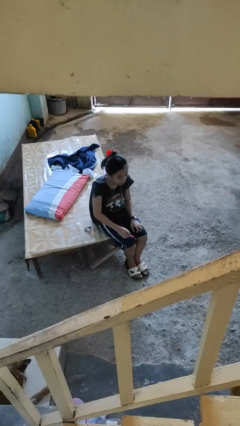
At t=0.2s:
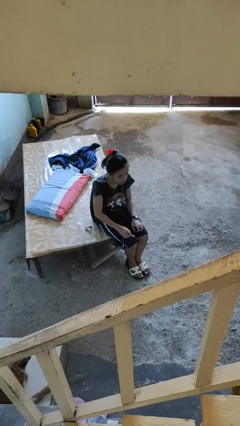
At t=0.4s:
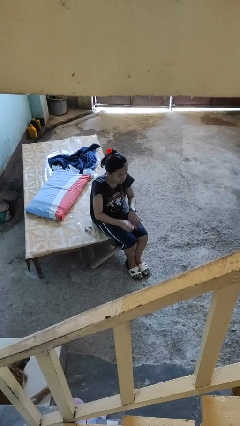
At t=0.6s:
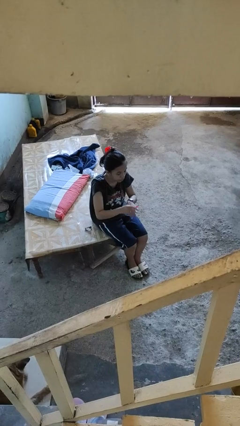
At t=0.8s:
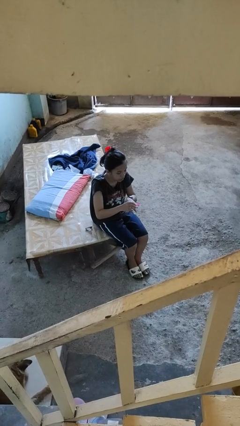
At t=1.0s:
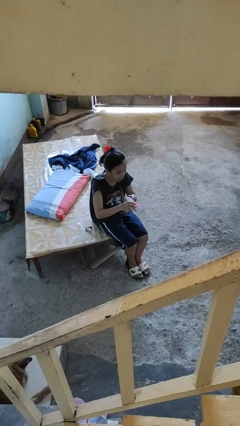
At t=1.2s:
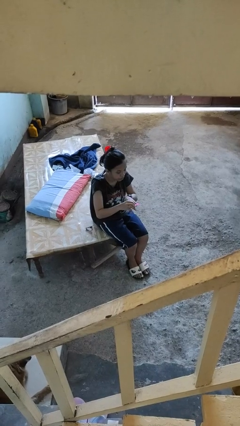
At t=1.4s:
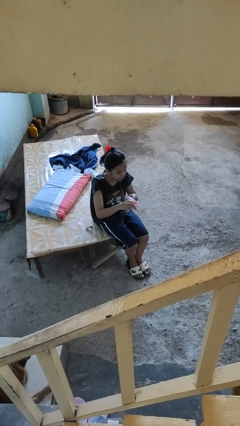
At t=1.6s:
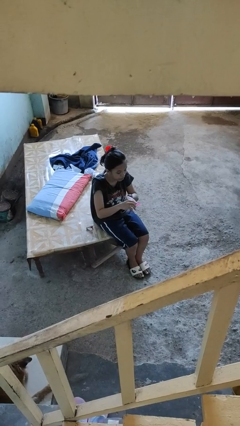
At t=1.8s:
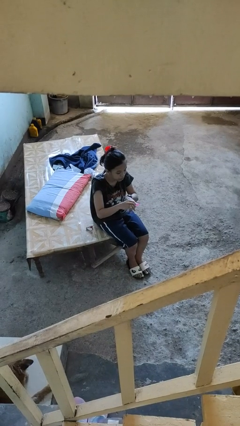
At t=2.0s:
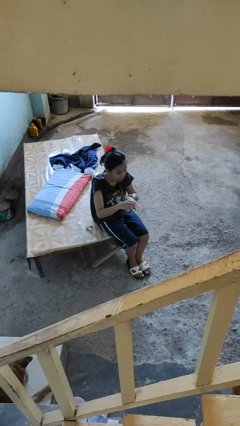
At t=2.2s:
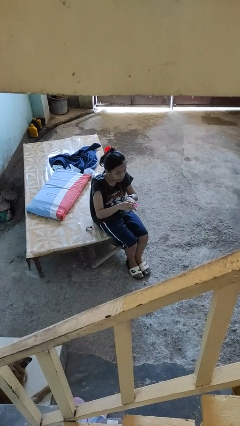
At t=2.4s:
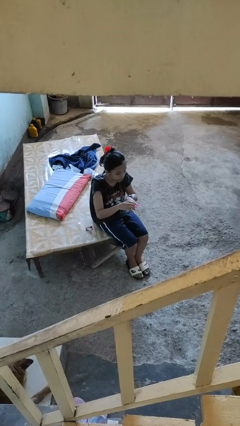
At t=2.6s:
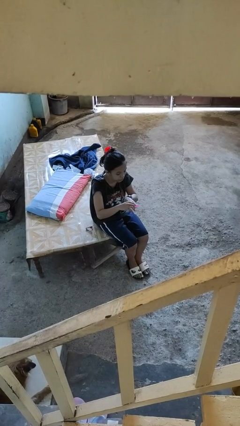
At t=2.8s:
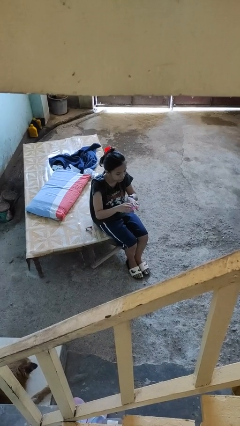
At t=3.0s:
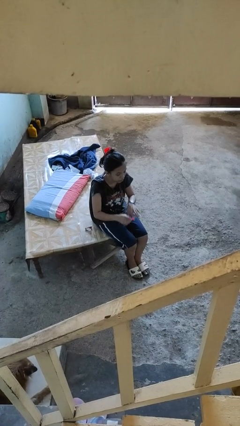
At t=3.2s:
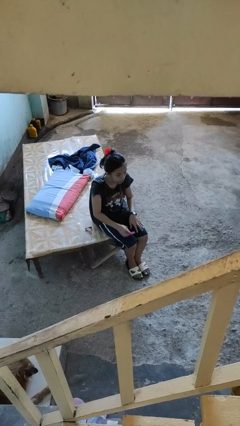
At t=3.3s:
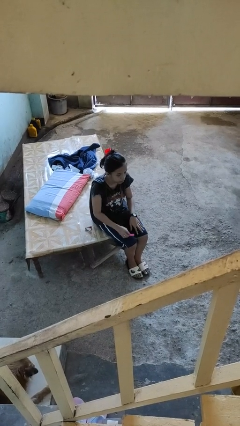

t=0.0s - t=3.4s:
person files fingernails

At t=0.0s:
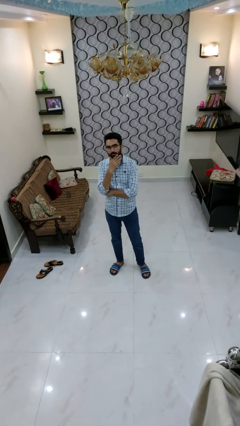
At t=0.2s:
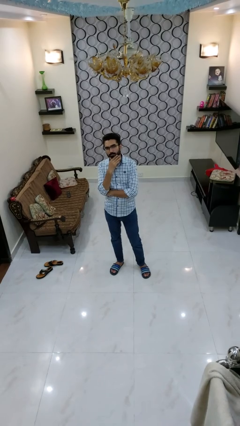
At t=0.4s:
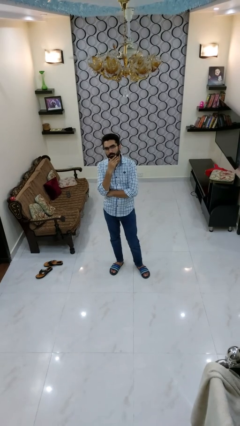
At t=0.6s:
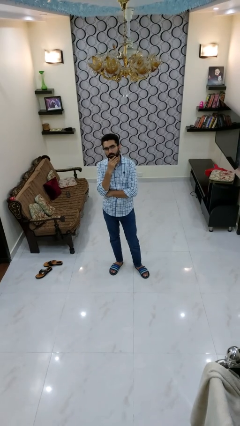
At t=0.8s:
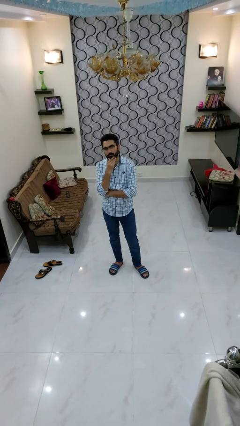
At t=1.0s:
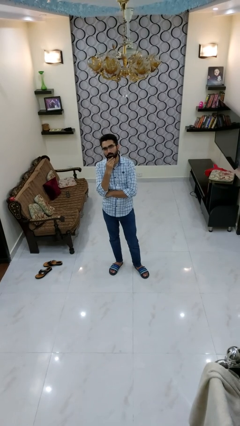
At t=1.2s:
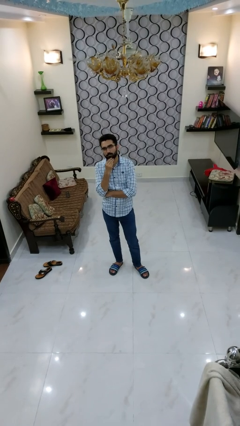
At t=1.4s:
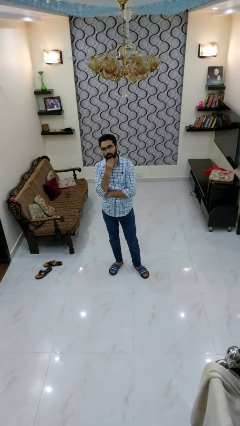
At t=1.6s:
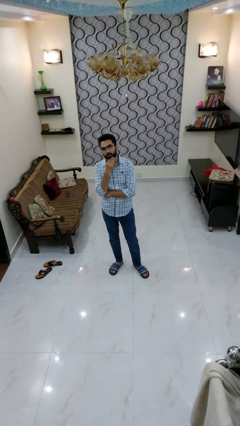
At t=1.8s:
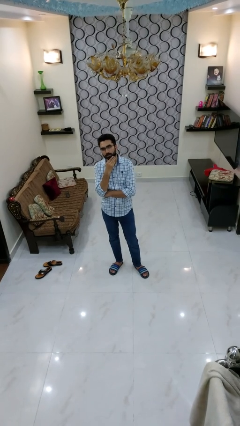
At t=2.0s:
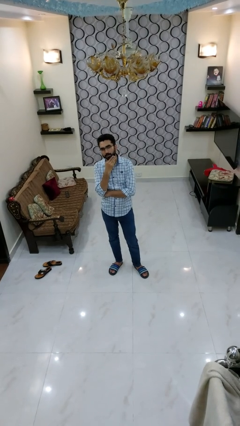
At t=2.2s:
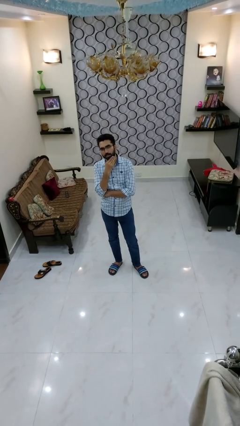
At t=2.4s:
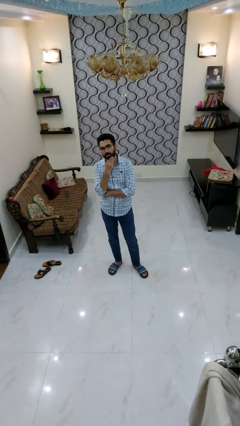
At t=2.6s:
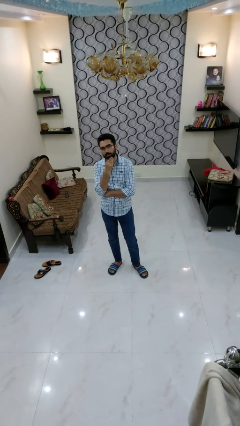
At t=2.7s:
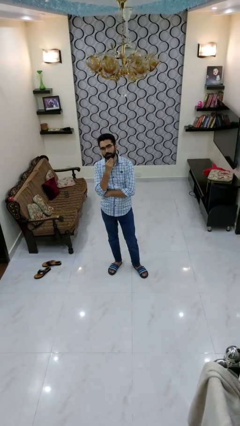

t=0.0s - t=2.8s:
person strokes chin

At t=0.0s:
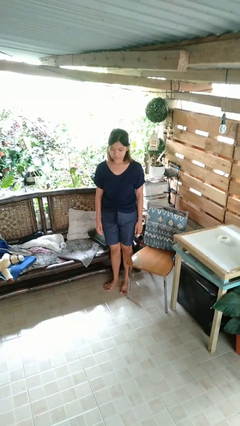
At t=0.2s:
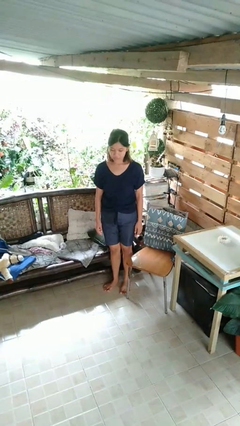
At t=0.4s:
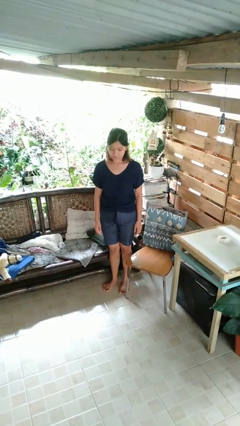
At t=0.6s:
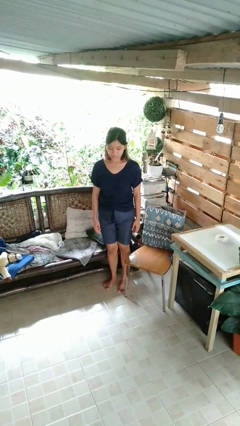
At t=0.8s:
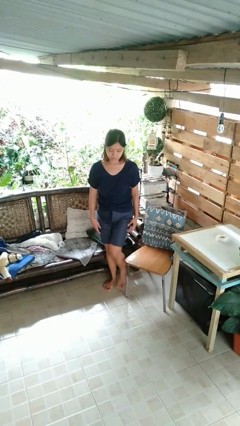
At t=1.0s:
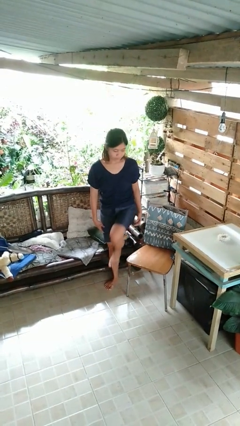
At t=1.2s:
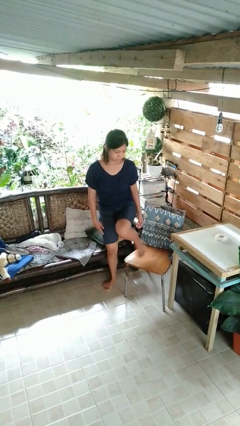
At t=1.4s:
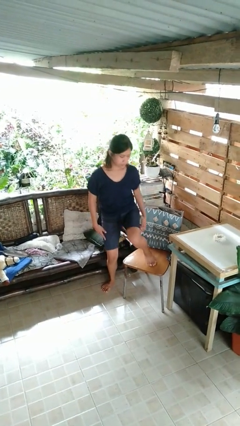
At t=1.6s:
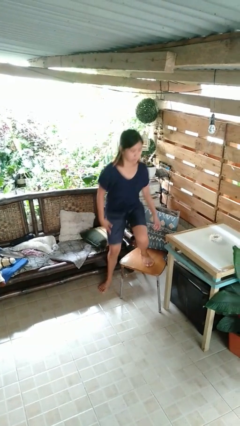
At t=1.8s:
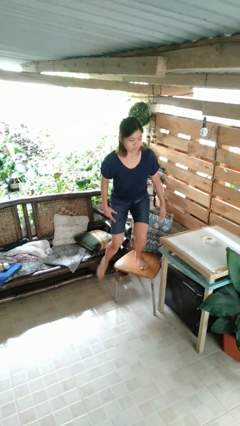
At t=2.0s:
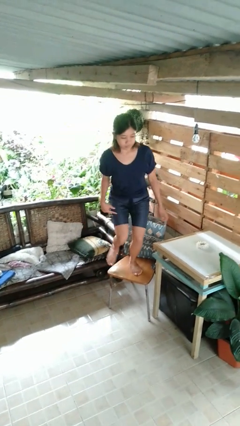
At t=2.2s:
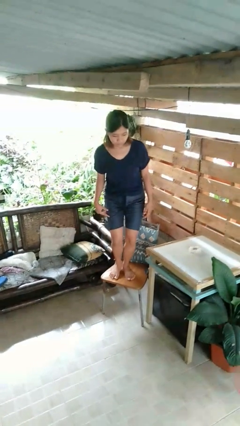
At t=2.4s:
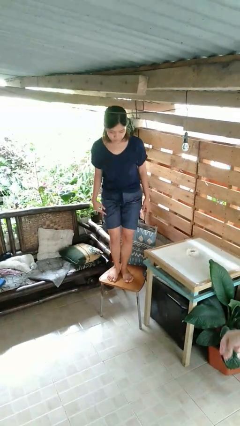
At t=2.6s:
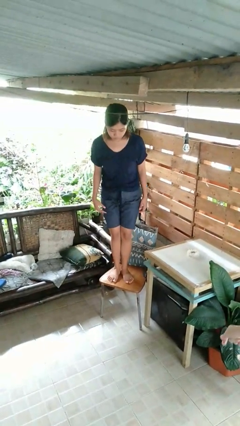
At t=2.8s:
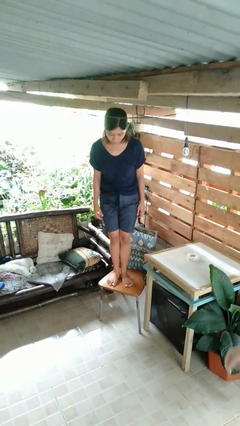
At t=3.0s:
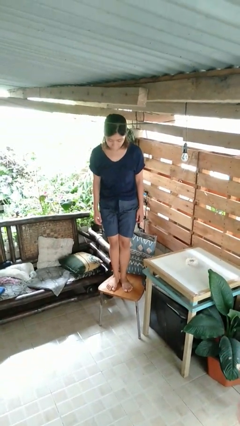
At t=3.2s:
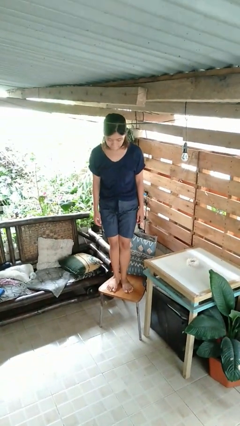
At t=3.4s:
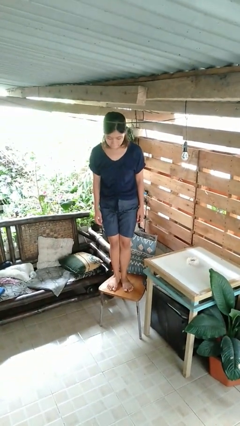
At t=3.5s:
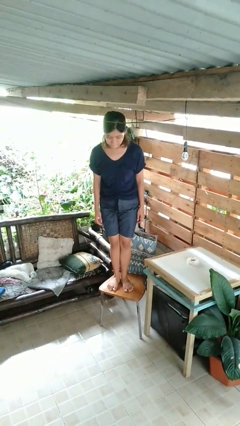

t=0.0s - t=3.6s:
person climbs on chair

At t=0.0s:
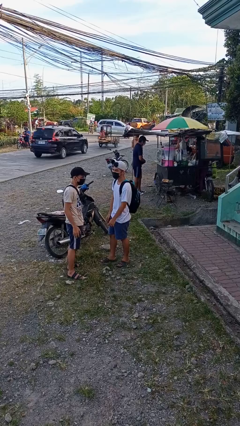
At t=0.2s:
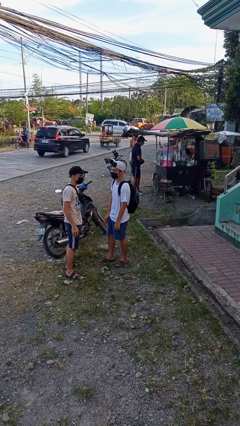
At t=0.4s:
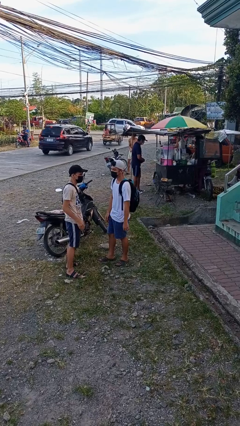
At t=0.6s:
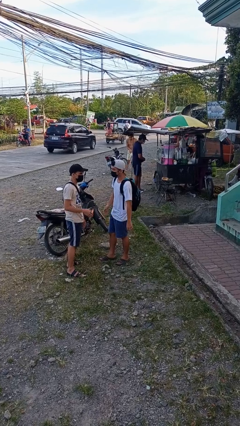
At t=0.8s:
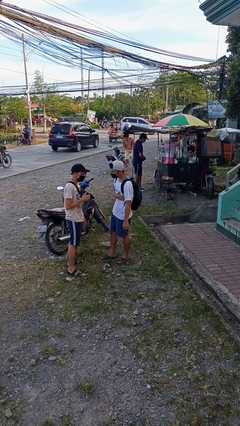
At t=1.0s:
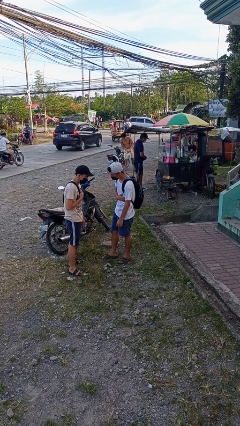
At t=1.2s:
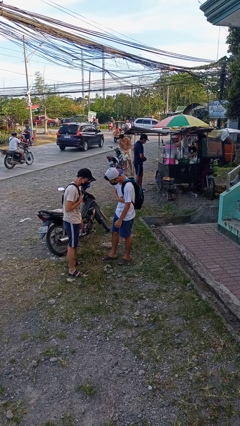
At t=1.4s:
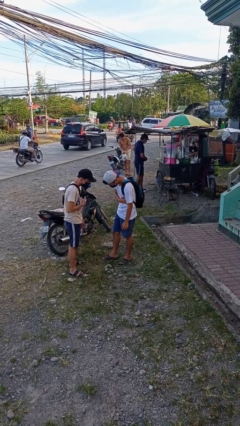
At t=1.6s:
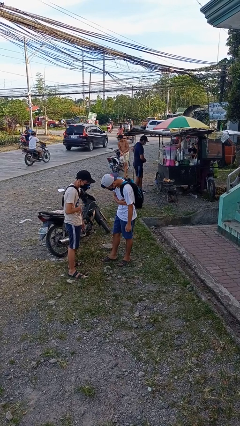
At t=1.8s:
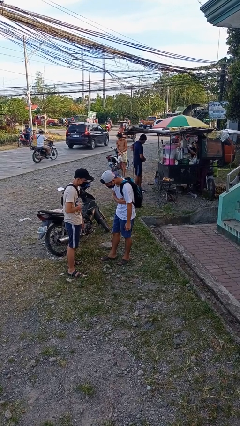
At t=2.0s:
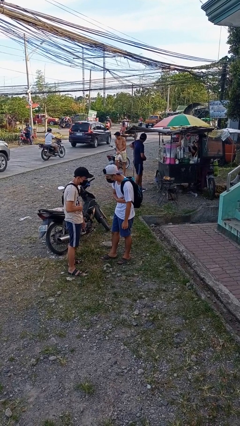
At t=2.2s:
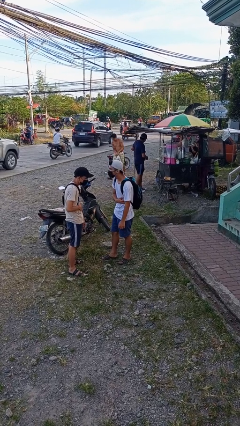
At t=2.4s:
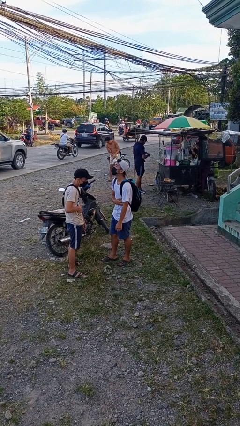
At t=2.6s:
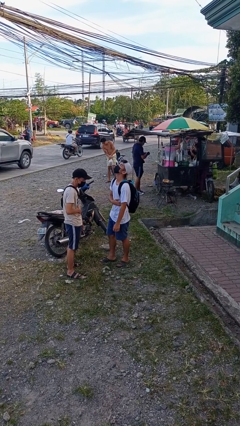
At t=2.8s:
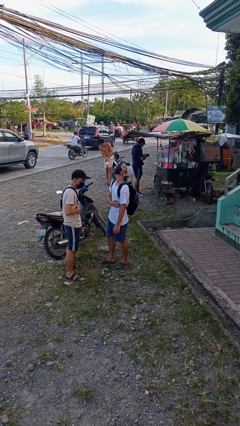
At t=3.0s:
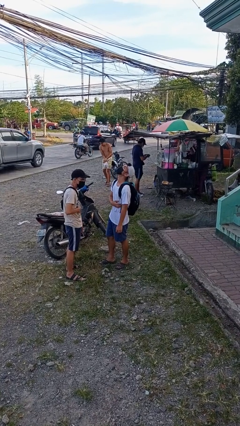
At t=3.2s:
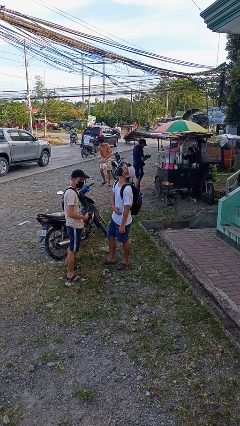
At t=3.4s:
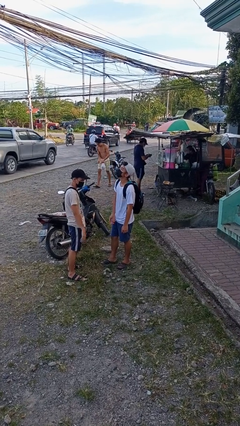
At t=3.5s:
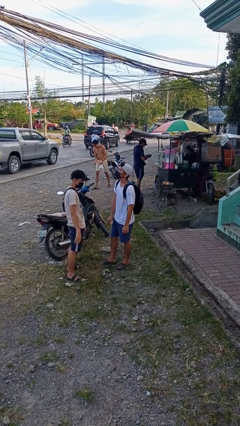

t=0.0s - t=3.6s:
person laughs with person

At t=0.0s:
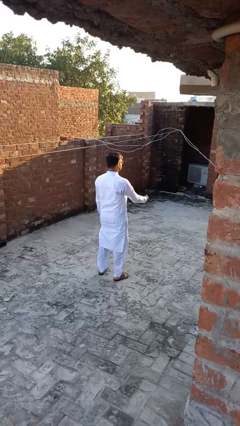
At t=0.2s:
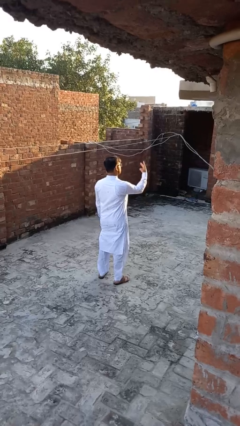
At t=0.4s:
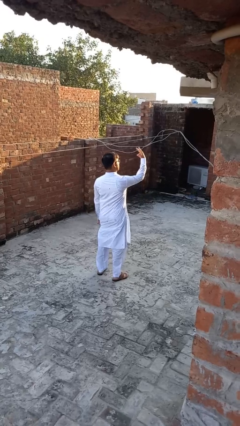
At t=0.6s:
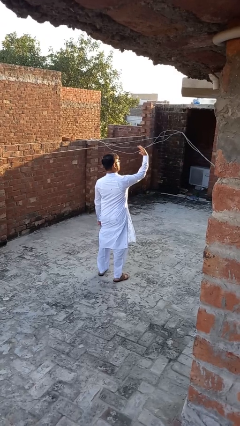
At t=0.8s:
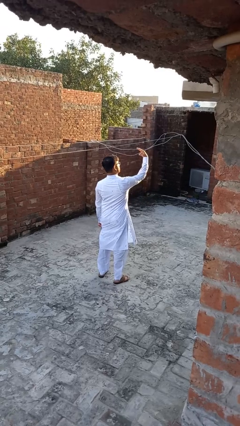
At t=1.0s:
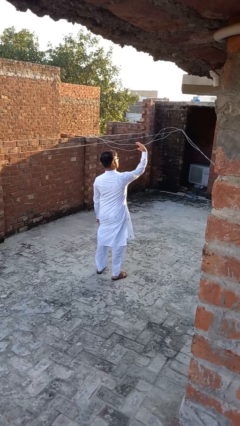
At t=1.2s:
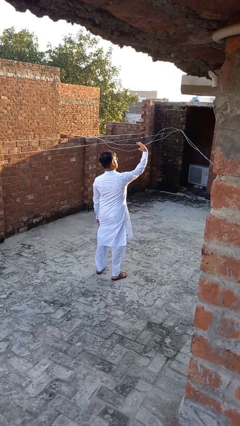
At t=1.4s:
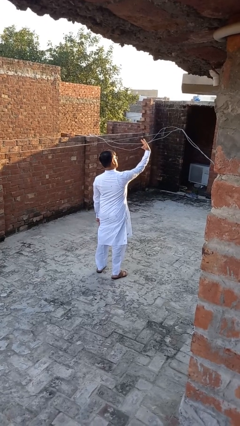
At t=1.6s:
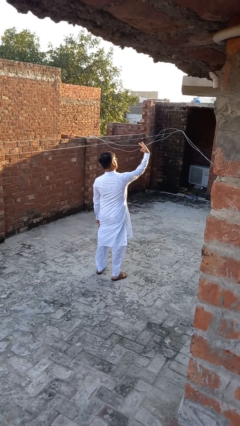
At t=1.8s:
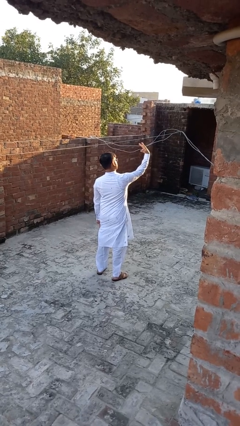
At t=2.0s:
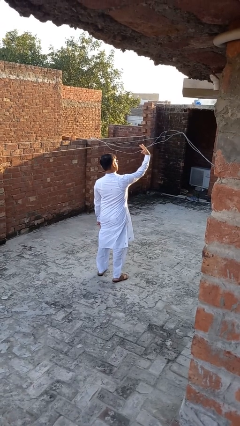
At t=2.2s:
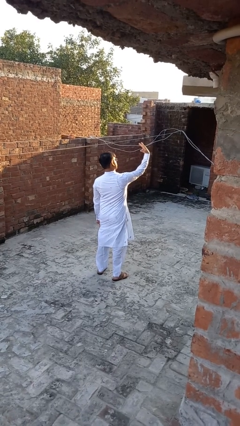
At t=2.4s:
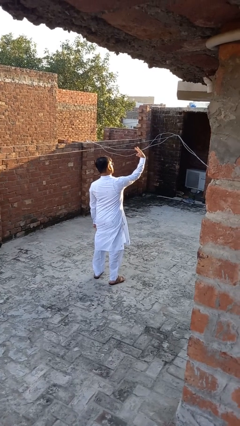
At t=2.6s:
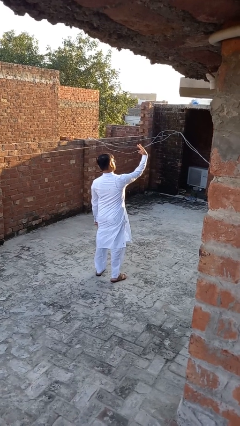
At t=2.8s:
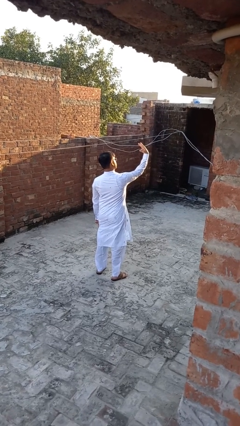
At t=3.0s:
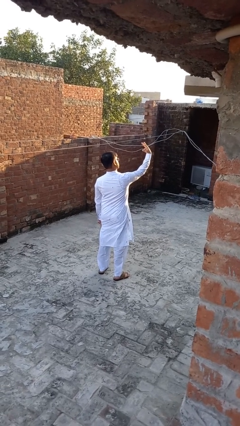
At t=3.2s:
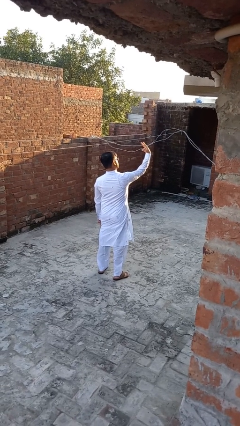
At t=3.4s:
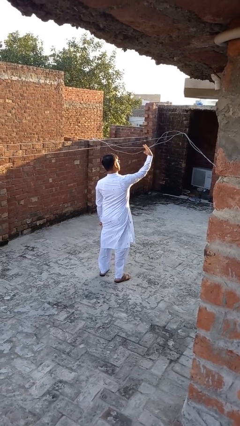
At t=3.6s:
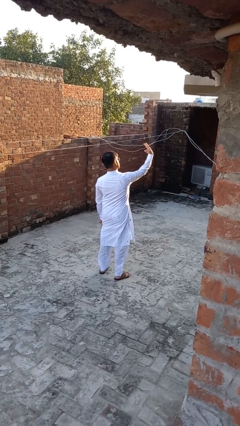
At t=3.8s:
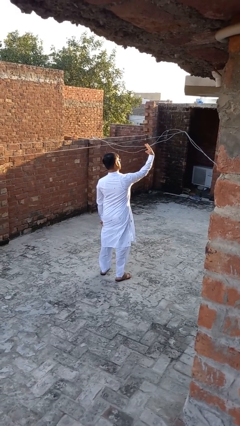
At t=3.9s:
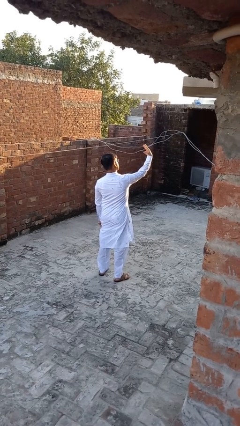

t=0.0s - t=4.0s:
person gestures peace

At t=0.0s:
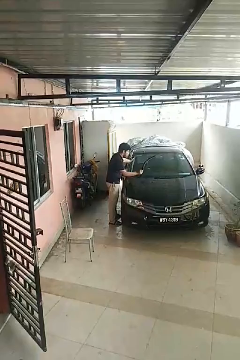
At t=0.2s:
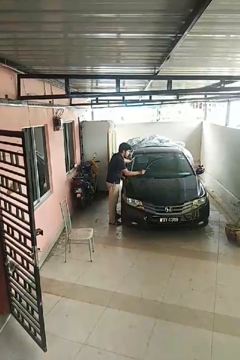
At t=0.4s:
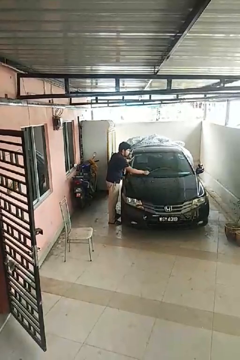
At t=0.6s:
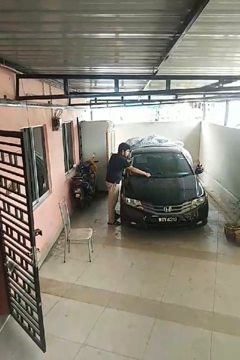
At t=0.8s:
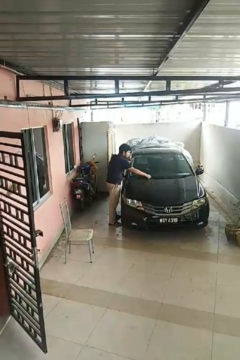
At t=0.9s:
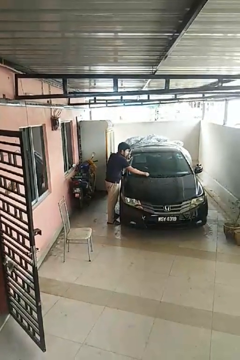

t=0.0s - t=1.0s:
person flips down car wipers
